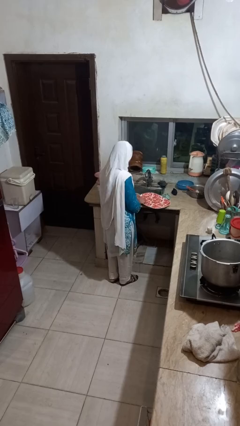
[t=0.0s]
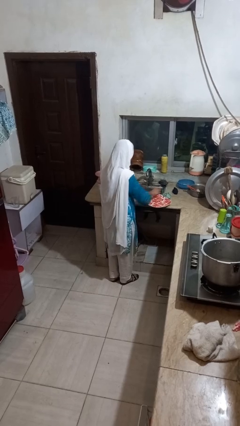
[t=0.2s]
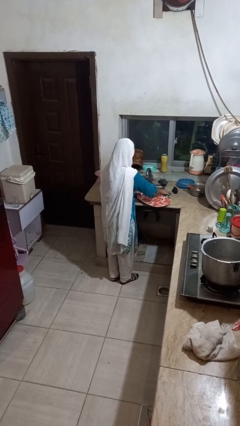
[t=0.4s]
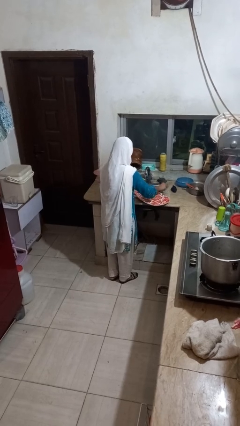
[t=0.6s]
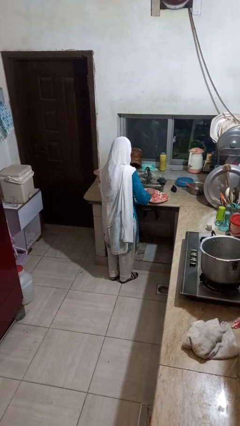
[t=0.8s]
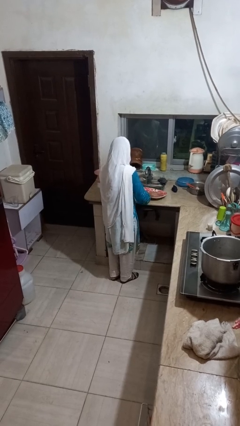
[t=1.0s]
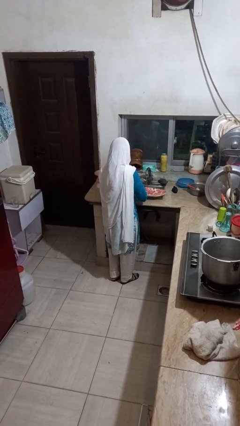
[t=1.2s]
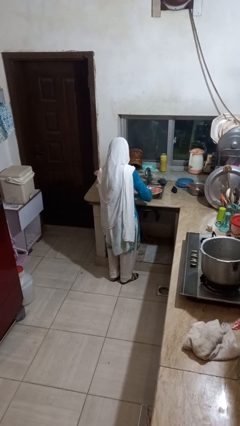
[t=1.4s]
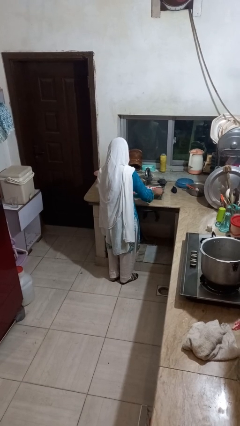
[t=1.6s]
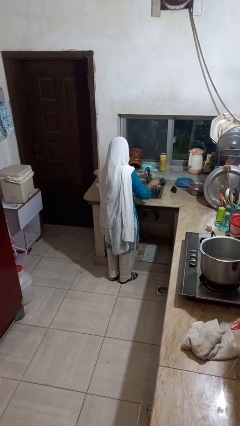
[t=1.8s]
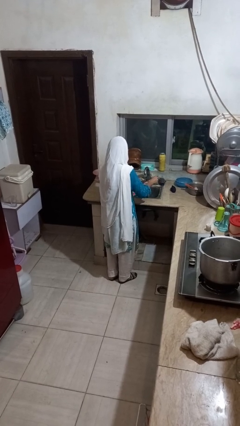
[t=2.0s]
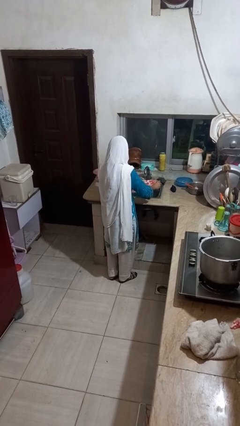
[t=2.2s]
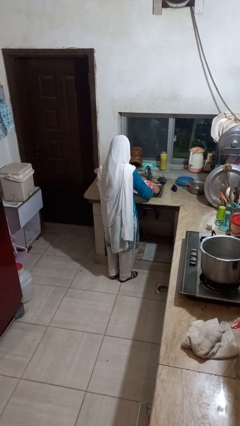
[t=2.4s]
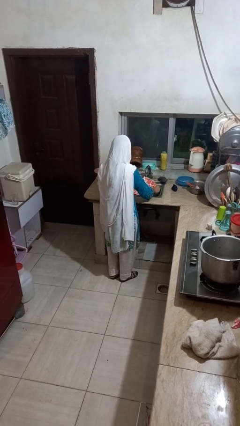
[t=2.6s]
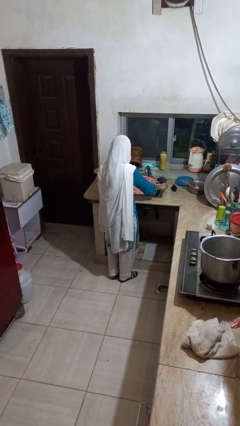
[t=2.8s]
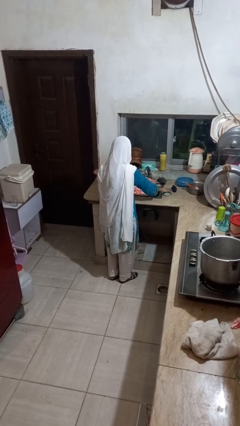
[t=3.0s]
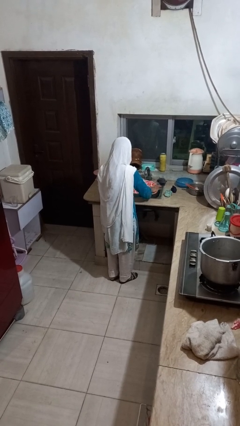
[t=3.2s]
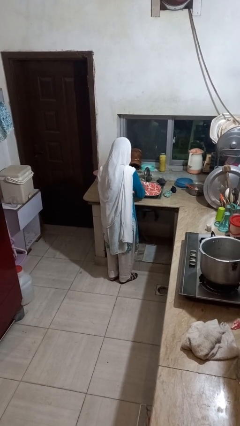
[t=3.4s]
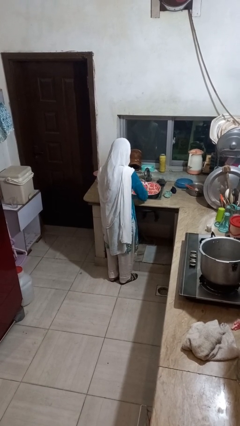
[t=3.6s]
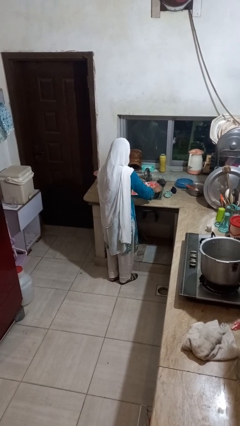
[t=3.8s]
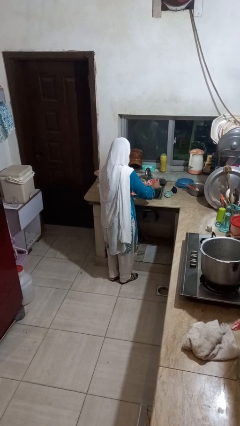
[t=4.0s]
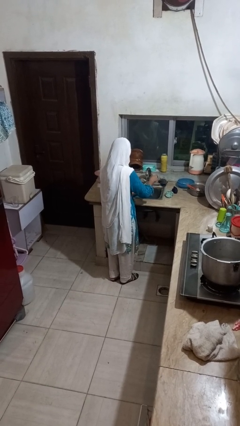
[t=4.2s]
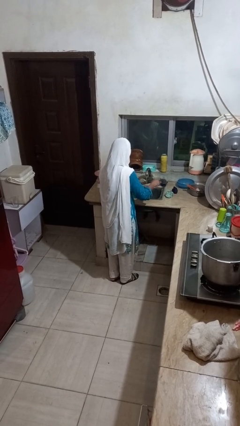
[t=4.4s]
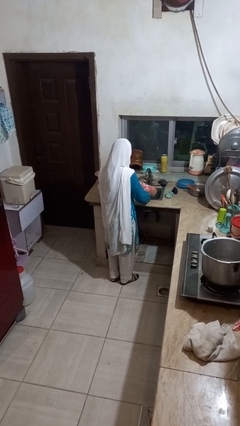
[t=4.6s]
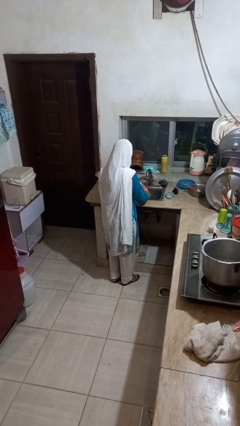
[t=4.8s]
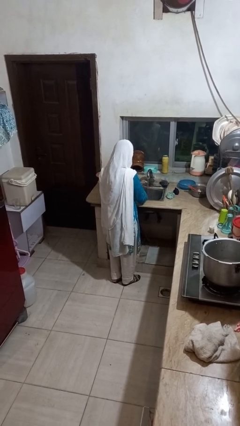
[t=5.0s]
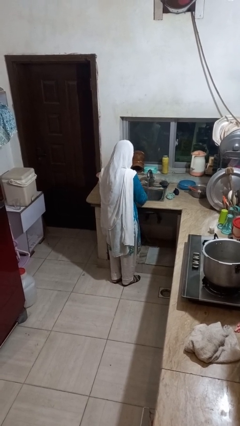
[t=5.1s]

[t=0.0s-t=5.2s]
person washes dish

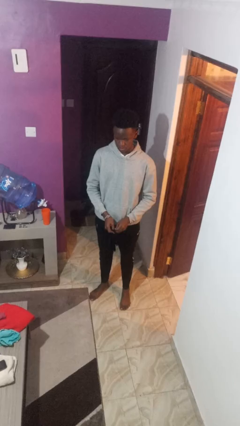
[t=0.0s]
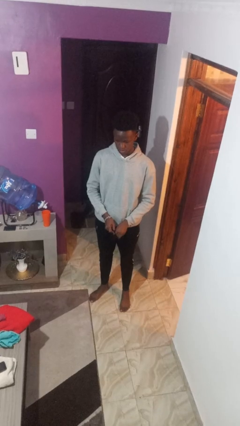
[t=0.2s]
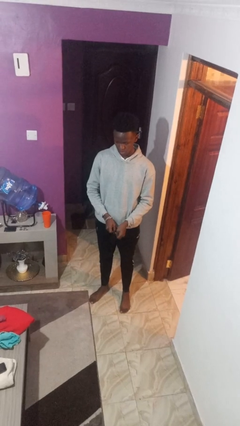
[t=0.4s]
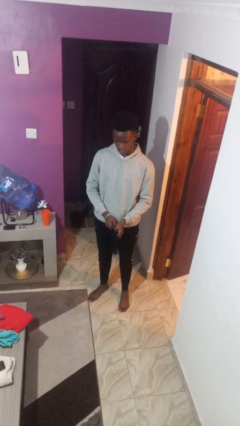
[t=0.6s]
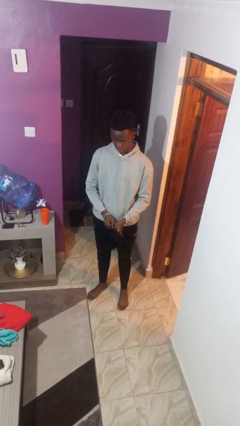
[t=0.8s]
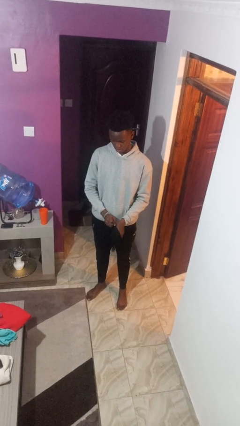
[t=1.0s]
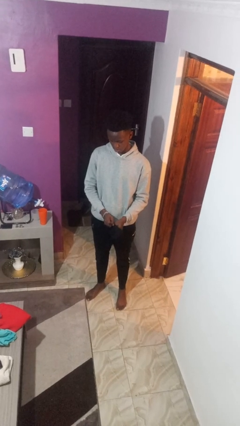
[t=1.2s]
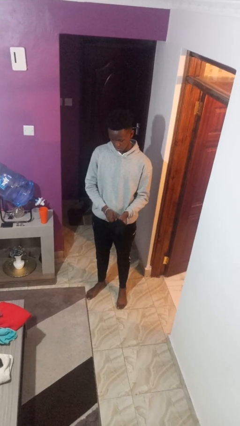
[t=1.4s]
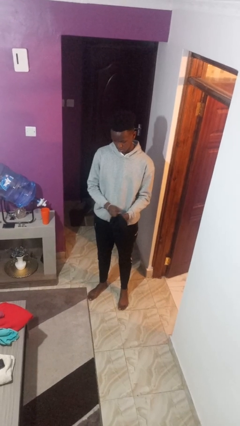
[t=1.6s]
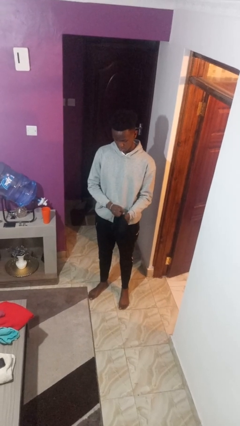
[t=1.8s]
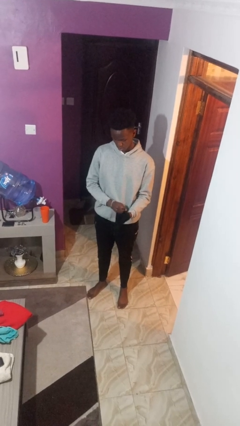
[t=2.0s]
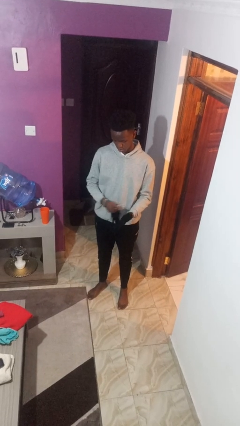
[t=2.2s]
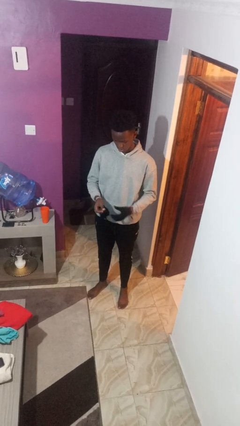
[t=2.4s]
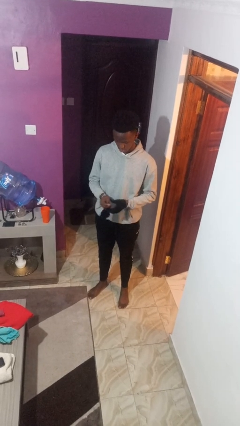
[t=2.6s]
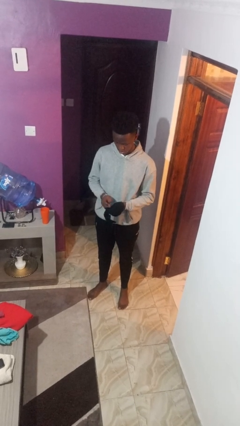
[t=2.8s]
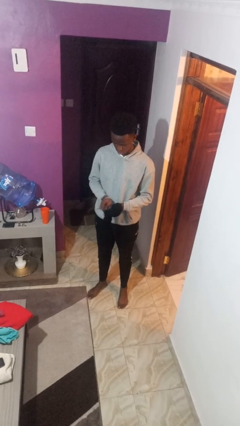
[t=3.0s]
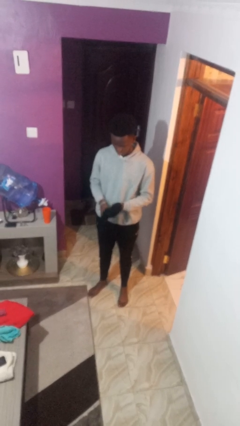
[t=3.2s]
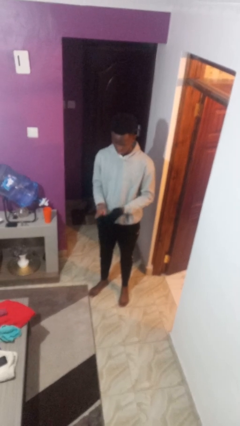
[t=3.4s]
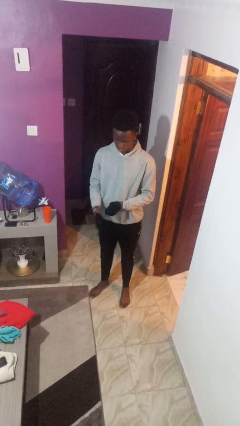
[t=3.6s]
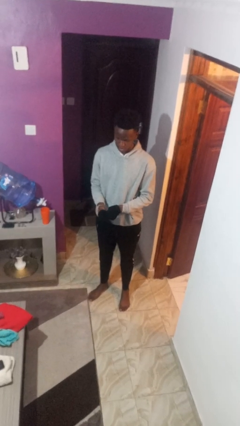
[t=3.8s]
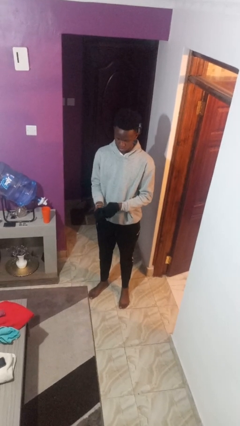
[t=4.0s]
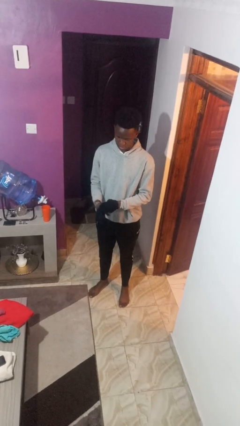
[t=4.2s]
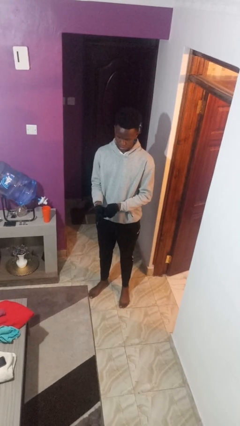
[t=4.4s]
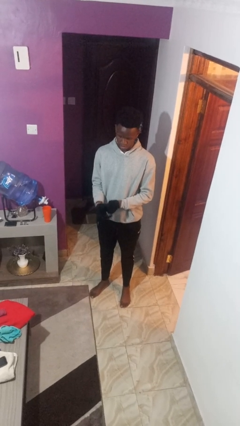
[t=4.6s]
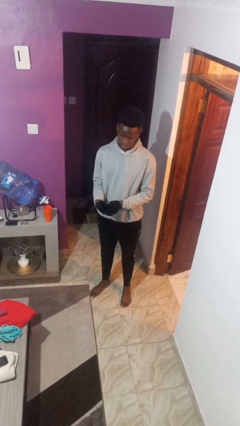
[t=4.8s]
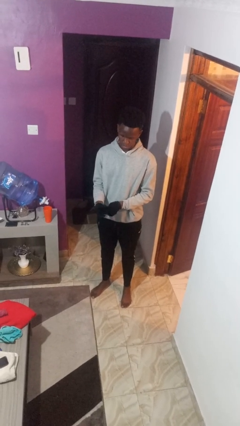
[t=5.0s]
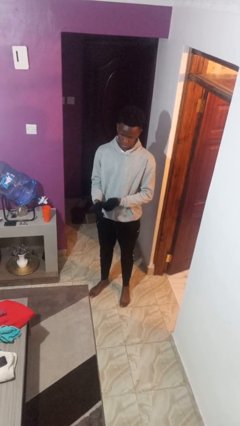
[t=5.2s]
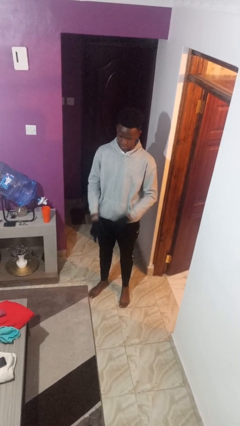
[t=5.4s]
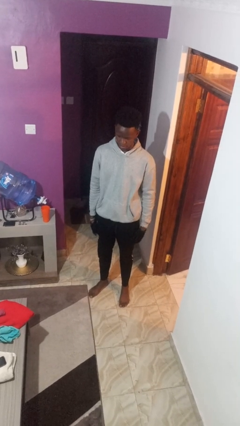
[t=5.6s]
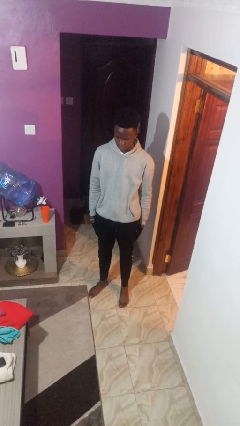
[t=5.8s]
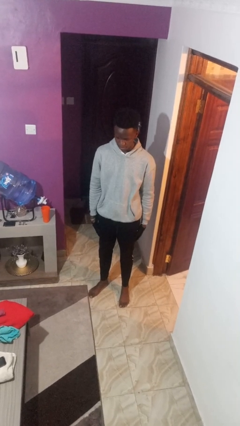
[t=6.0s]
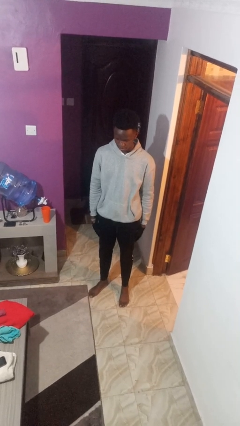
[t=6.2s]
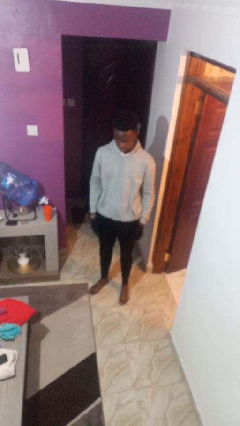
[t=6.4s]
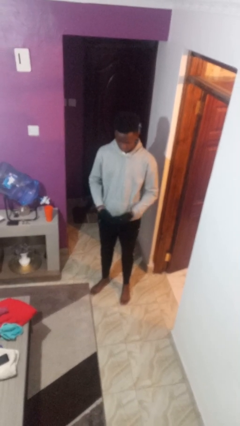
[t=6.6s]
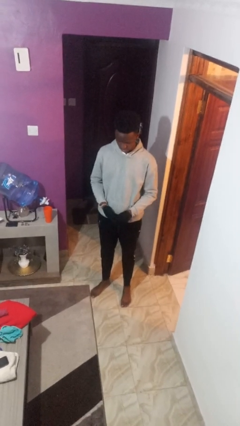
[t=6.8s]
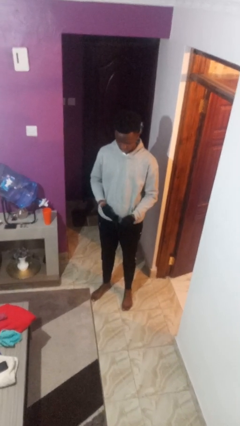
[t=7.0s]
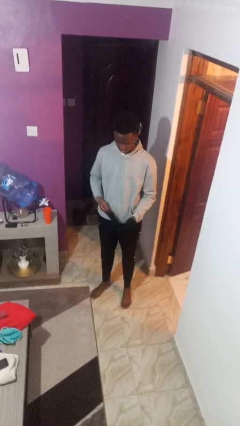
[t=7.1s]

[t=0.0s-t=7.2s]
person puts on gloves

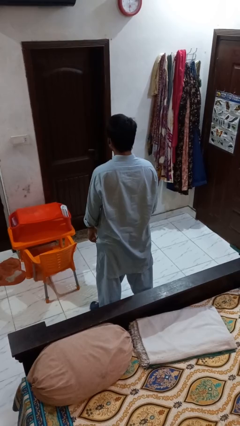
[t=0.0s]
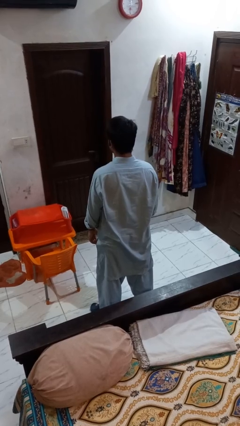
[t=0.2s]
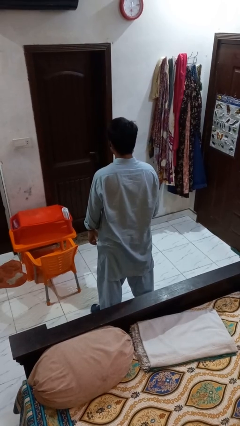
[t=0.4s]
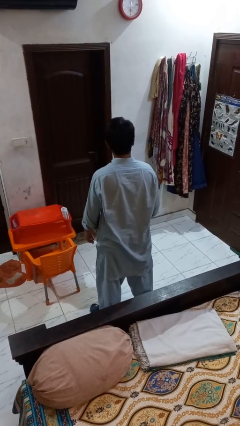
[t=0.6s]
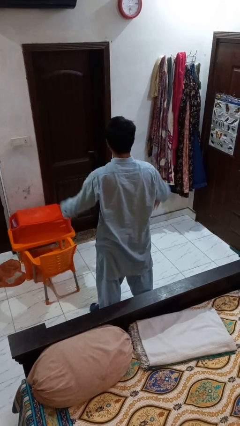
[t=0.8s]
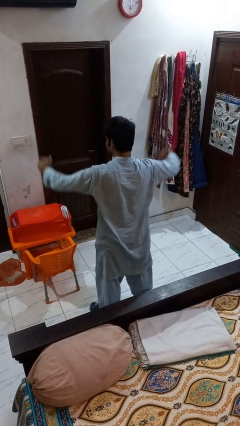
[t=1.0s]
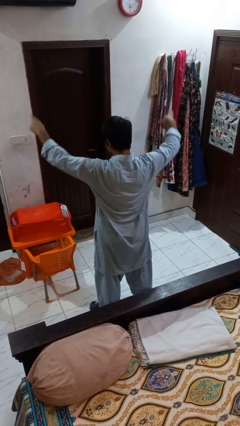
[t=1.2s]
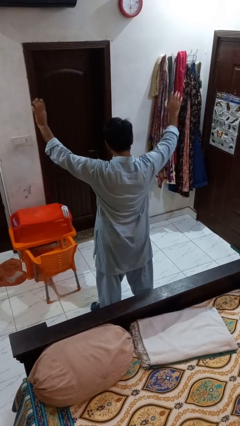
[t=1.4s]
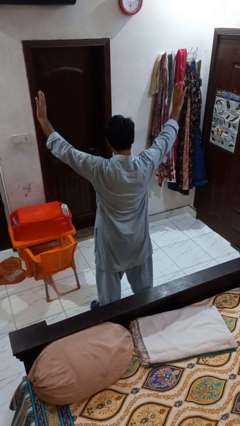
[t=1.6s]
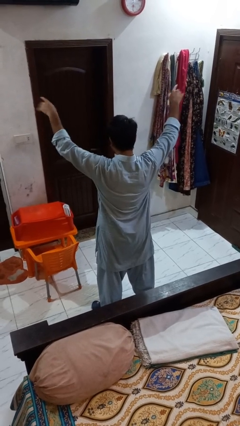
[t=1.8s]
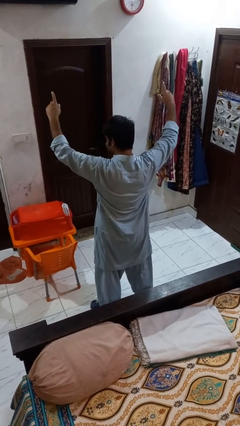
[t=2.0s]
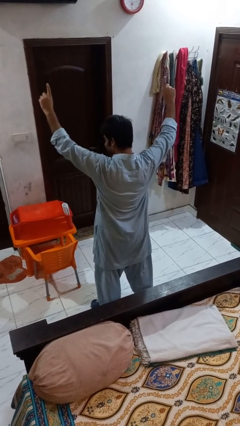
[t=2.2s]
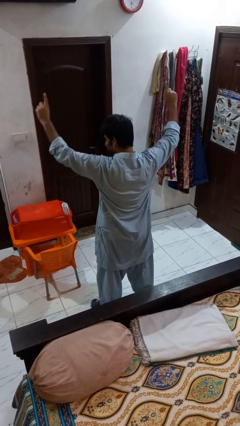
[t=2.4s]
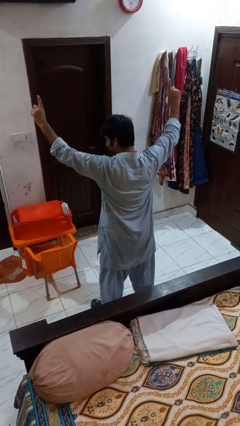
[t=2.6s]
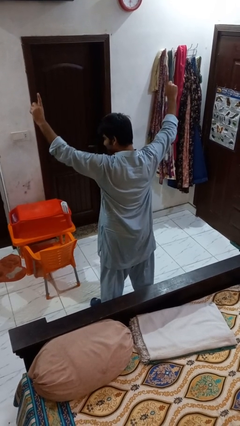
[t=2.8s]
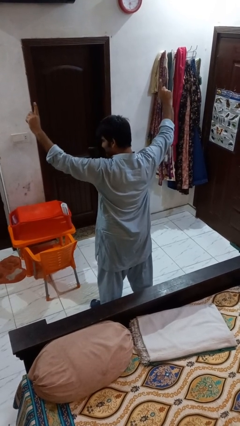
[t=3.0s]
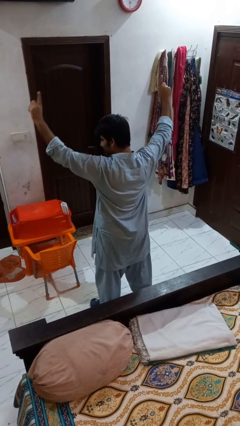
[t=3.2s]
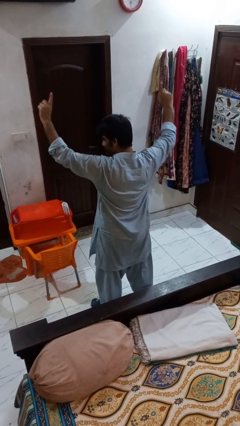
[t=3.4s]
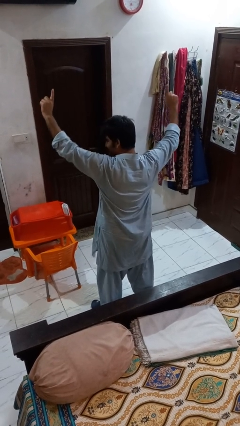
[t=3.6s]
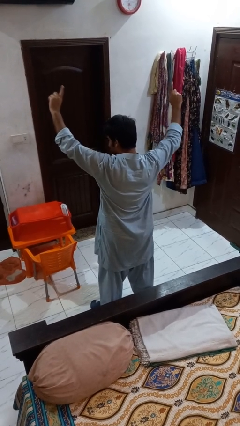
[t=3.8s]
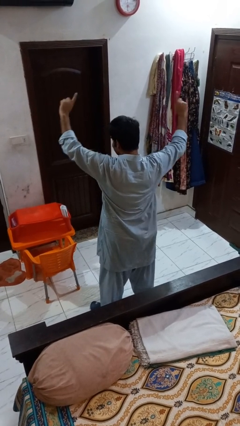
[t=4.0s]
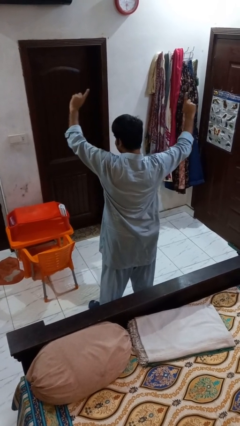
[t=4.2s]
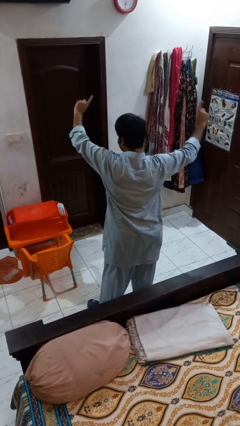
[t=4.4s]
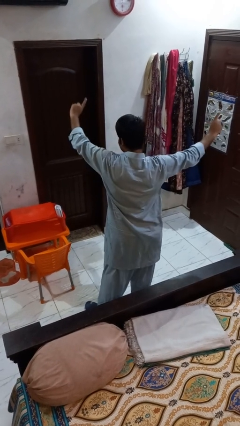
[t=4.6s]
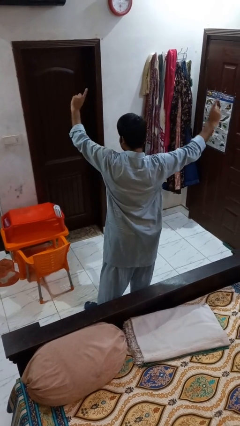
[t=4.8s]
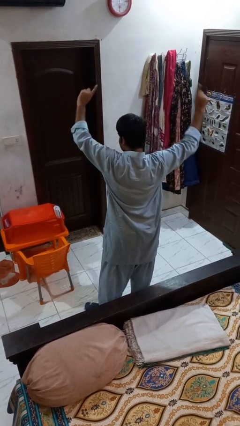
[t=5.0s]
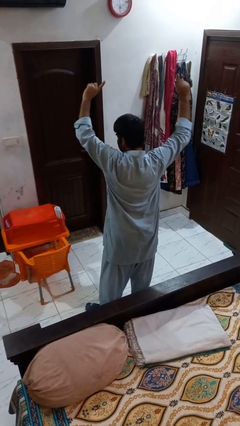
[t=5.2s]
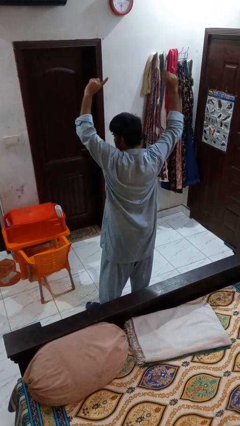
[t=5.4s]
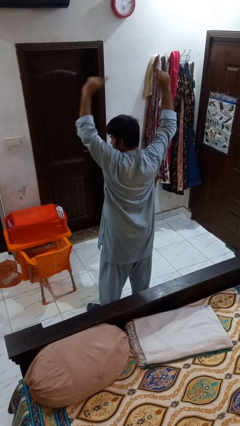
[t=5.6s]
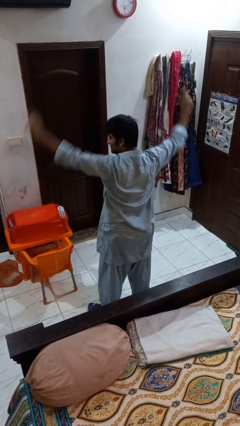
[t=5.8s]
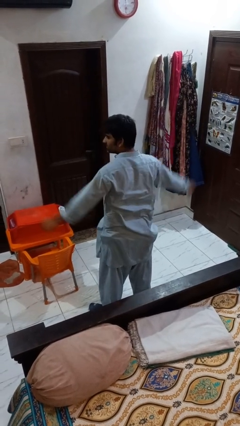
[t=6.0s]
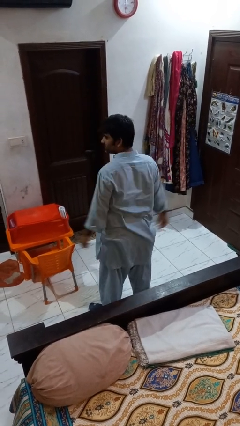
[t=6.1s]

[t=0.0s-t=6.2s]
person dances in place
